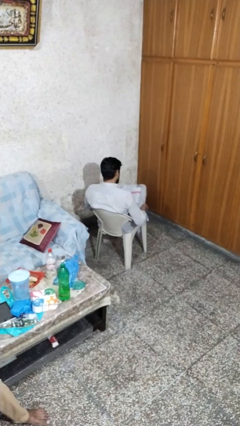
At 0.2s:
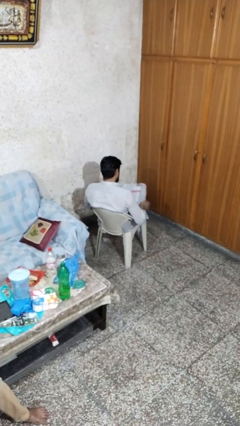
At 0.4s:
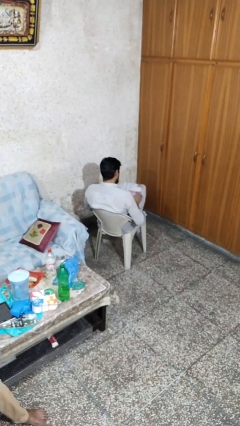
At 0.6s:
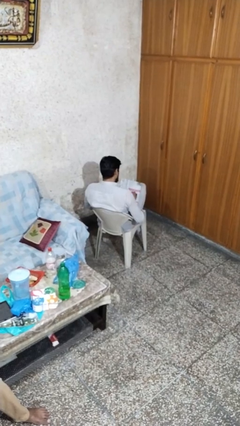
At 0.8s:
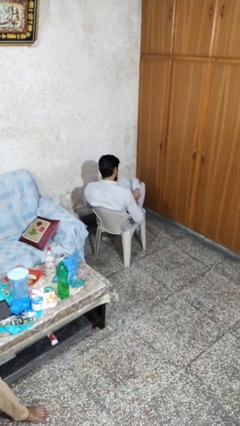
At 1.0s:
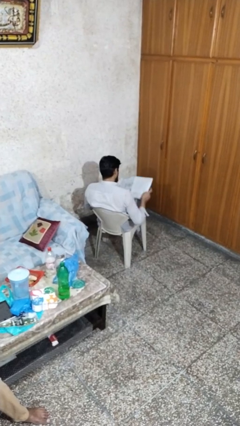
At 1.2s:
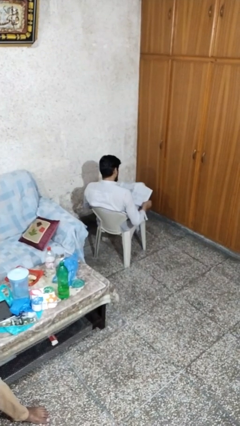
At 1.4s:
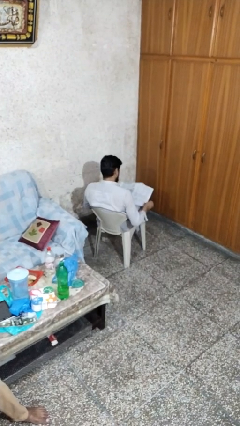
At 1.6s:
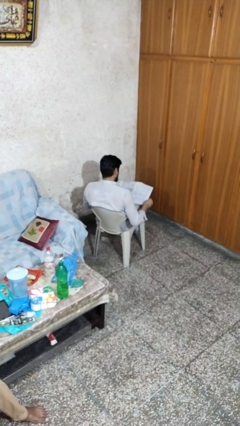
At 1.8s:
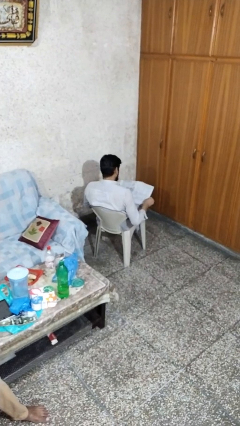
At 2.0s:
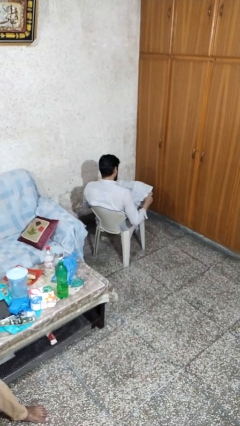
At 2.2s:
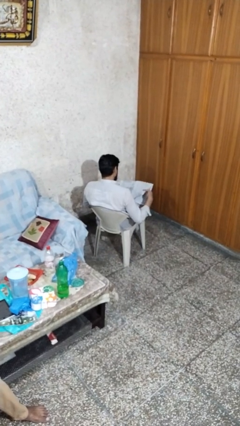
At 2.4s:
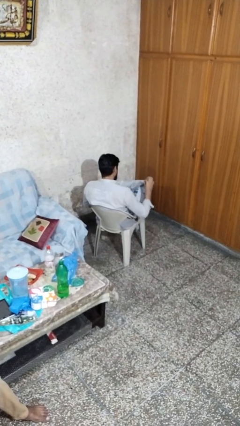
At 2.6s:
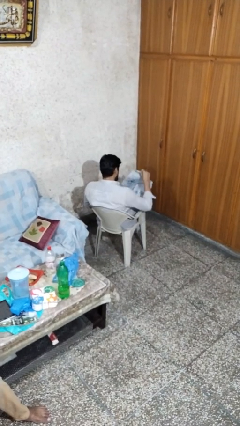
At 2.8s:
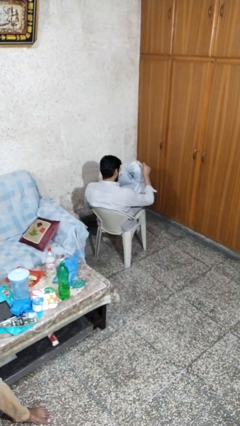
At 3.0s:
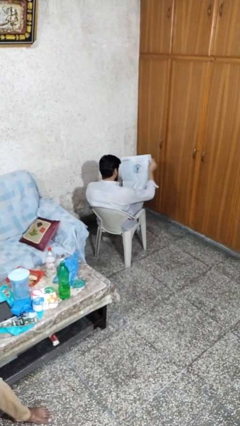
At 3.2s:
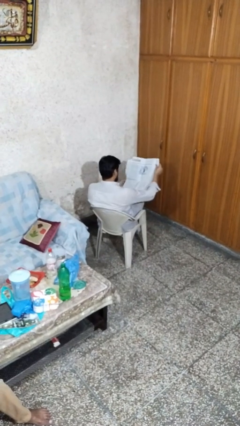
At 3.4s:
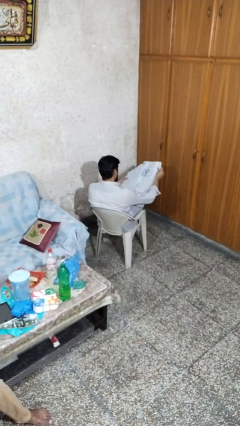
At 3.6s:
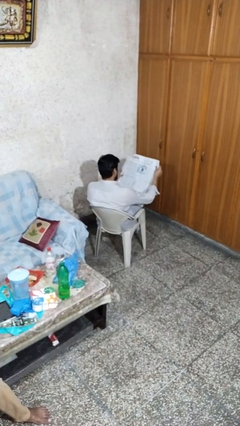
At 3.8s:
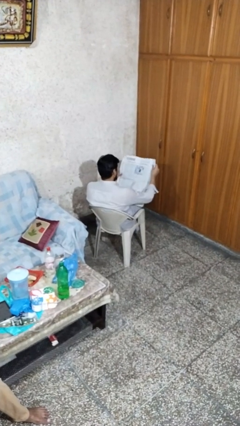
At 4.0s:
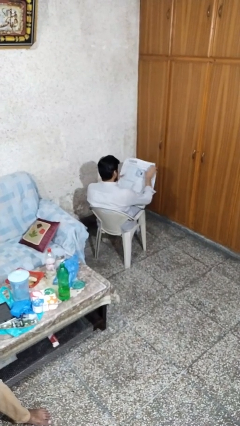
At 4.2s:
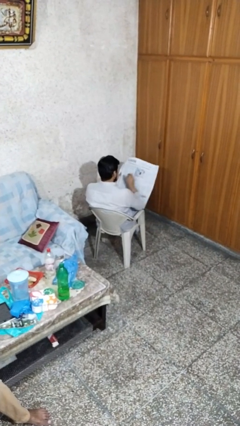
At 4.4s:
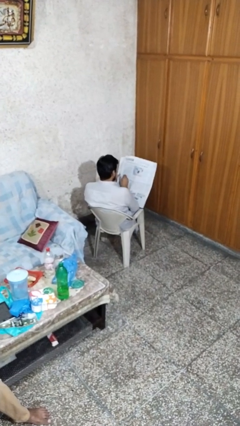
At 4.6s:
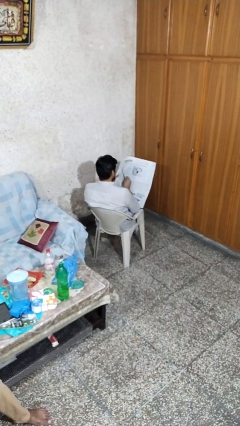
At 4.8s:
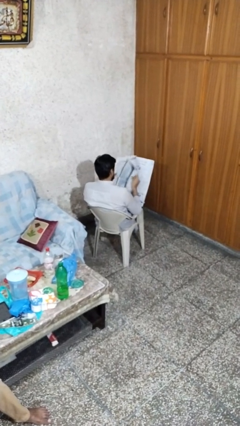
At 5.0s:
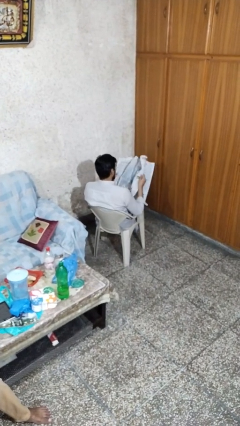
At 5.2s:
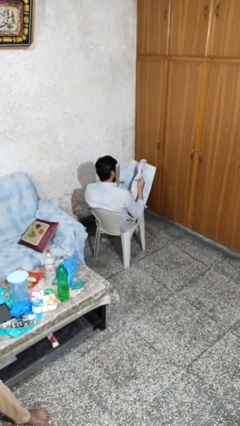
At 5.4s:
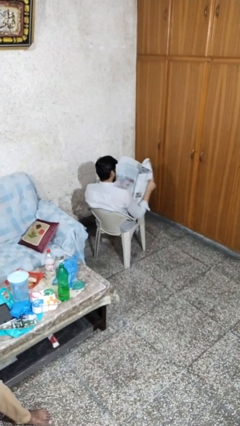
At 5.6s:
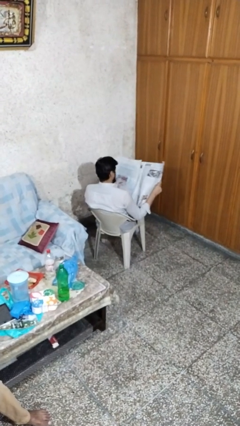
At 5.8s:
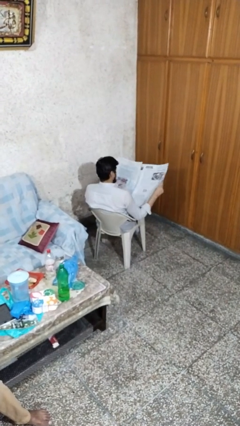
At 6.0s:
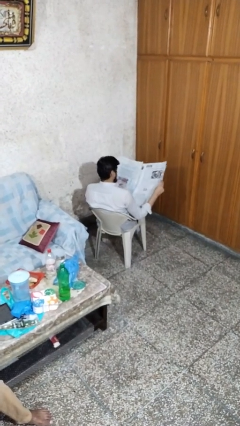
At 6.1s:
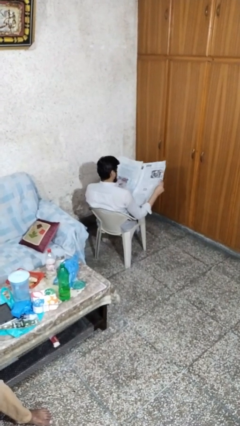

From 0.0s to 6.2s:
person reads newspaper

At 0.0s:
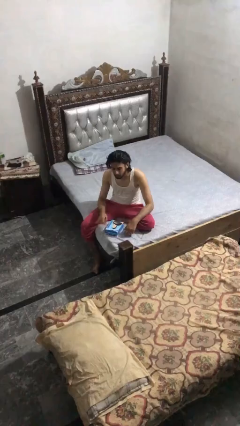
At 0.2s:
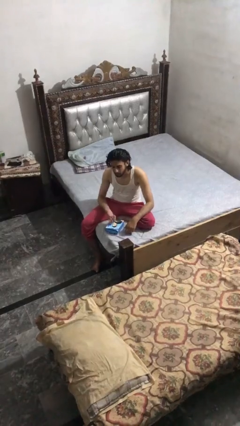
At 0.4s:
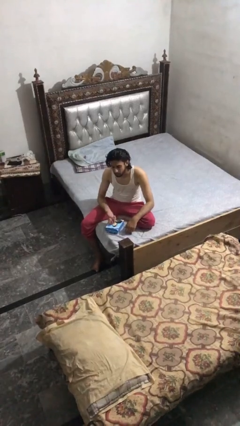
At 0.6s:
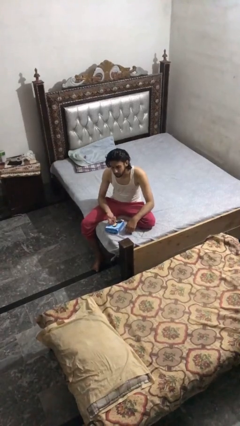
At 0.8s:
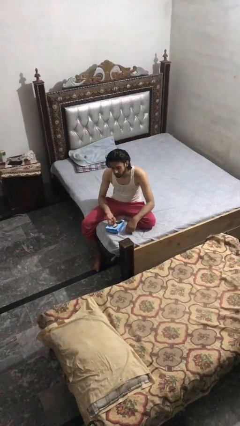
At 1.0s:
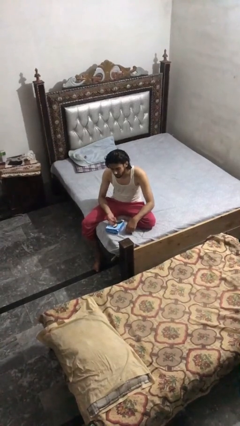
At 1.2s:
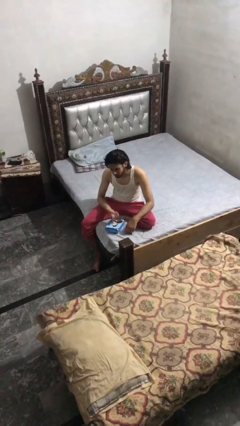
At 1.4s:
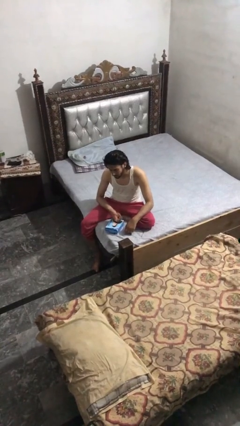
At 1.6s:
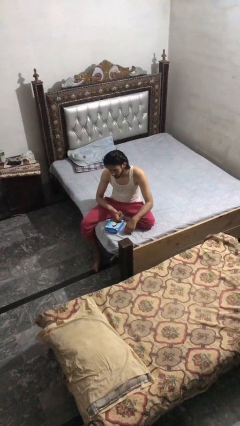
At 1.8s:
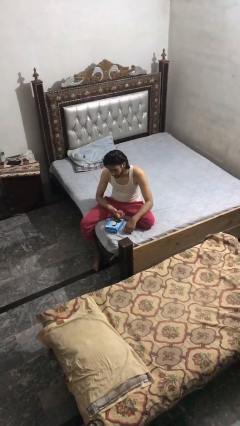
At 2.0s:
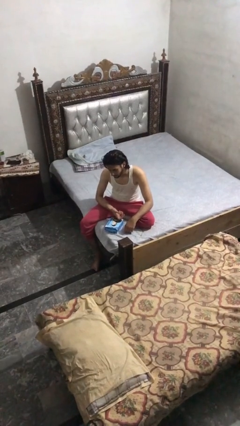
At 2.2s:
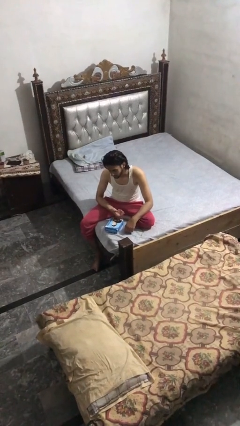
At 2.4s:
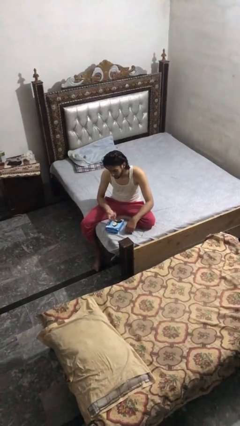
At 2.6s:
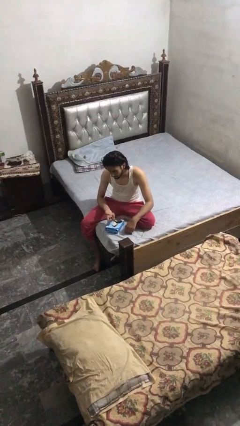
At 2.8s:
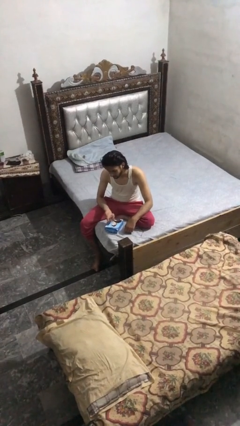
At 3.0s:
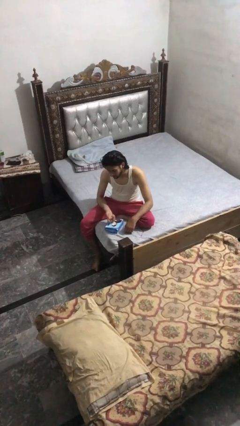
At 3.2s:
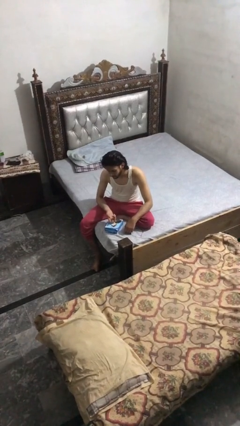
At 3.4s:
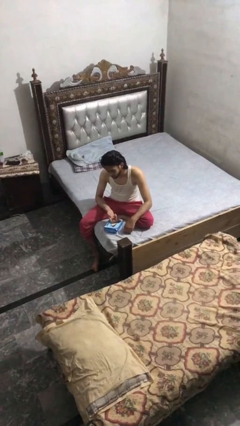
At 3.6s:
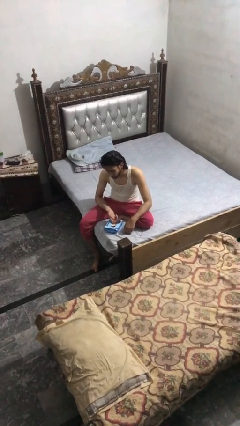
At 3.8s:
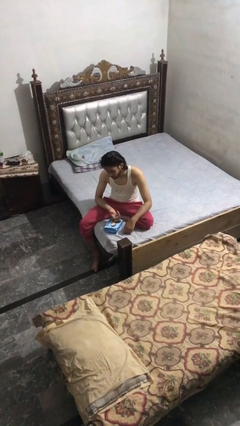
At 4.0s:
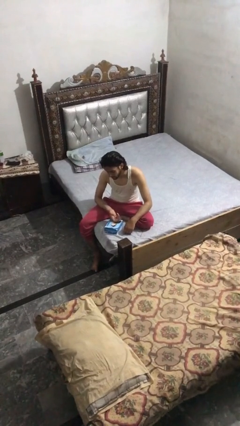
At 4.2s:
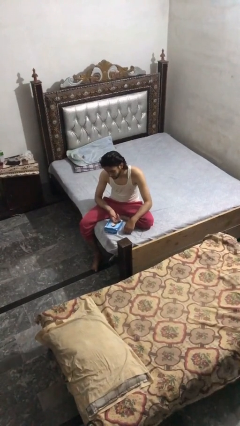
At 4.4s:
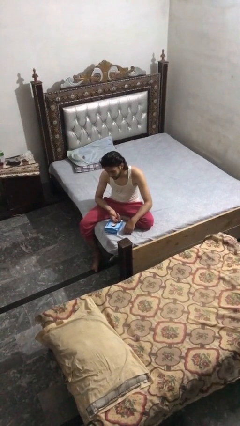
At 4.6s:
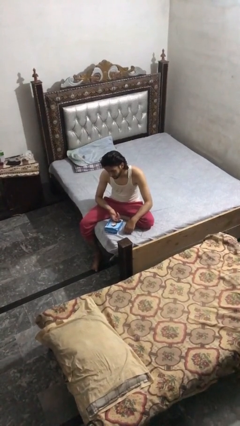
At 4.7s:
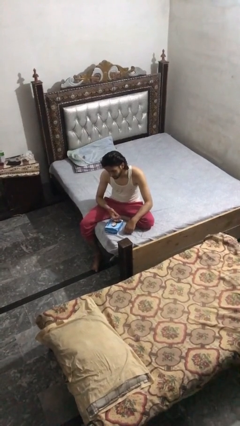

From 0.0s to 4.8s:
person taps object with finger

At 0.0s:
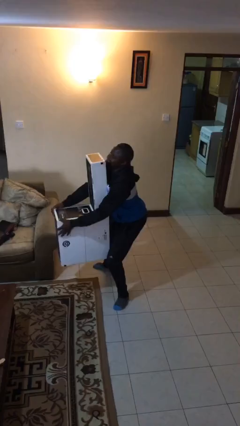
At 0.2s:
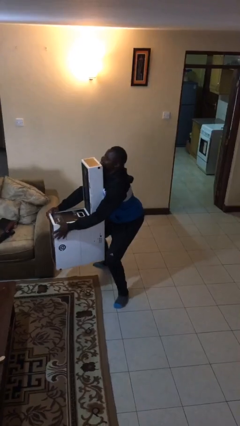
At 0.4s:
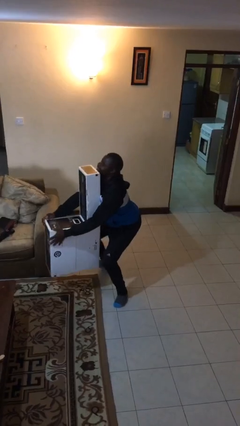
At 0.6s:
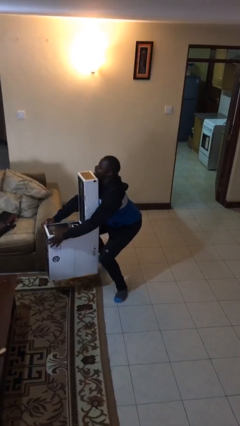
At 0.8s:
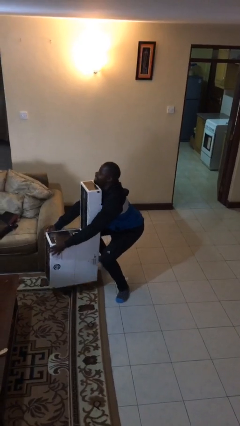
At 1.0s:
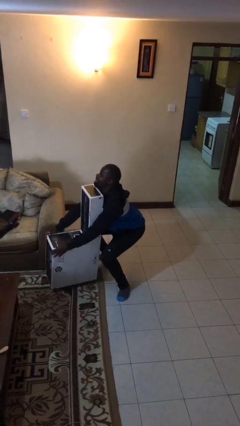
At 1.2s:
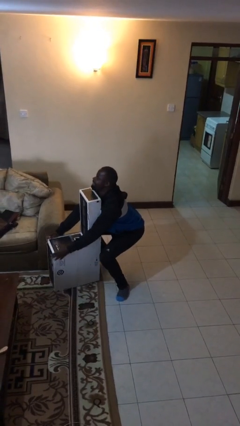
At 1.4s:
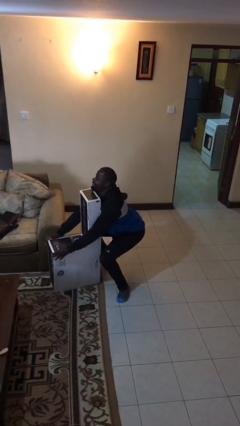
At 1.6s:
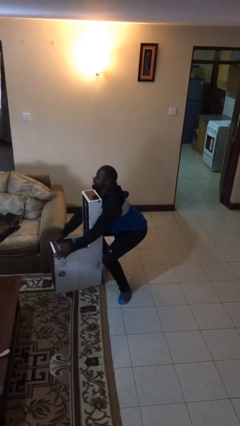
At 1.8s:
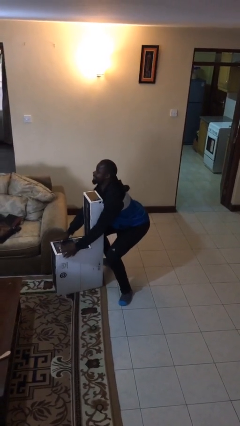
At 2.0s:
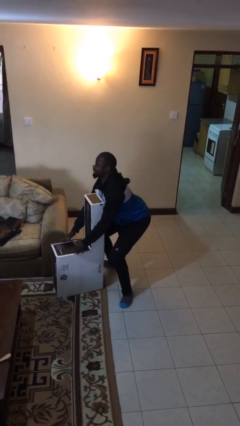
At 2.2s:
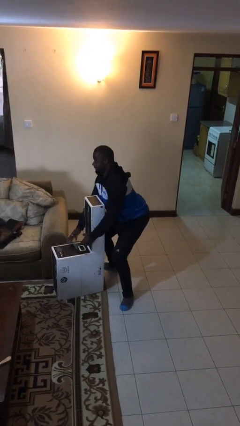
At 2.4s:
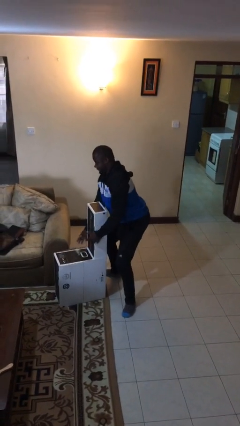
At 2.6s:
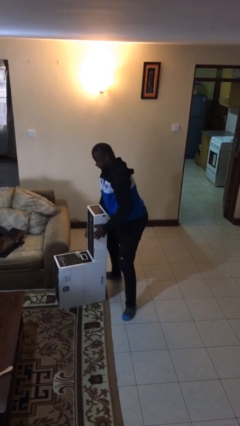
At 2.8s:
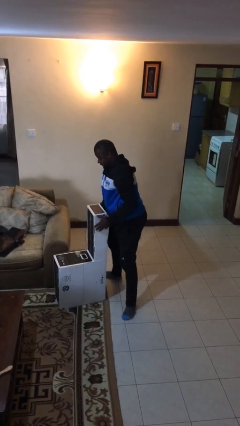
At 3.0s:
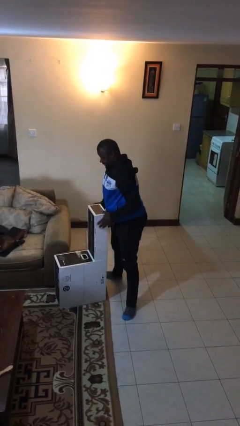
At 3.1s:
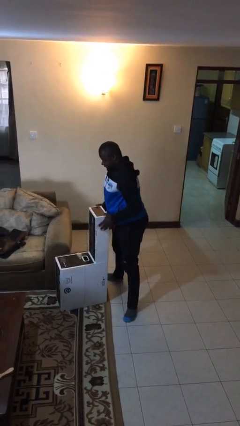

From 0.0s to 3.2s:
person puts down object on floor

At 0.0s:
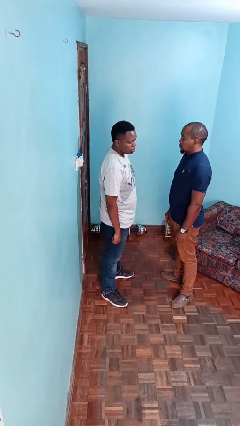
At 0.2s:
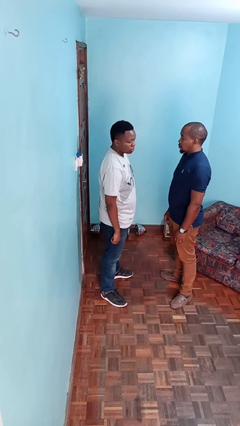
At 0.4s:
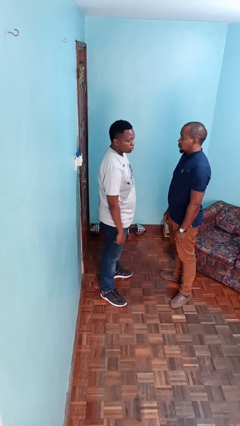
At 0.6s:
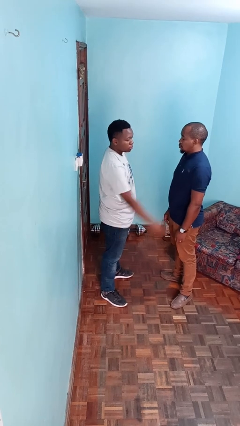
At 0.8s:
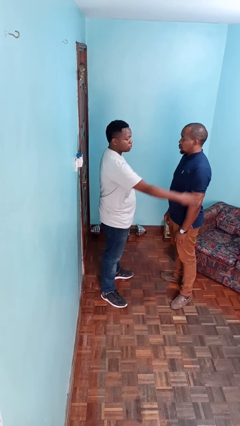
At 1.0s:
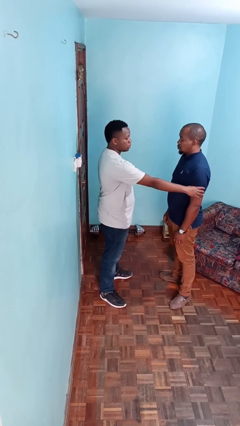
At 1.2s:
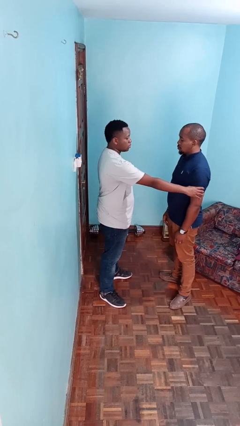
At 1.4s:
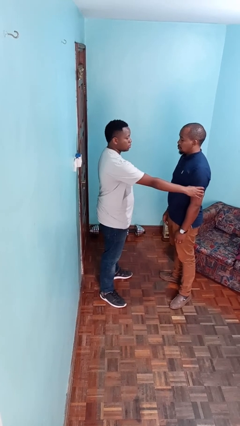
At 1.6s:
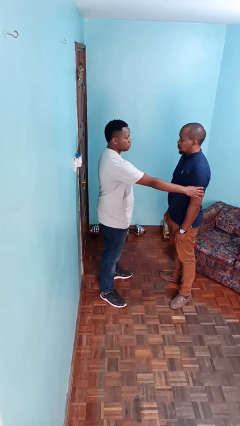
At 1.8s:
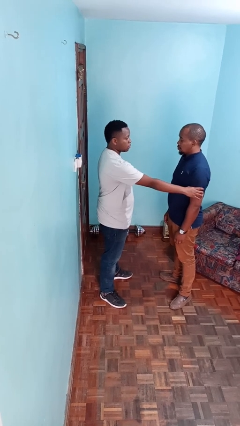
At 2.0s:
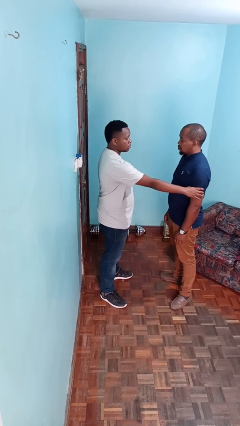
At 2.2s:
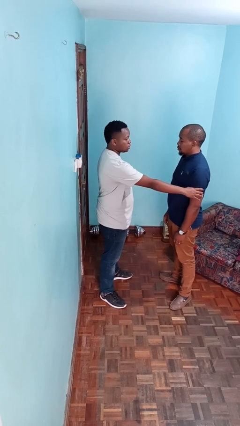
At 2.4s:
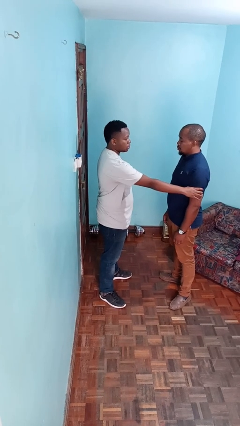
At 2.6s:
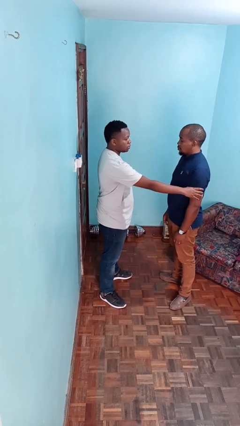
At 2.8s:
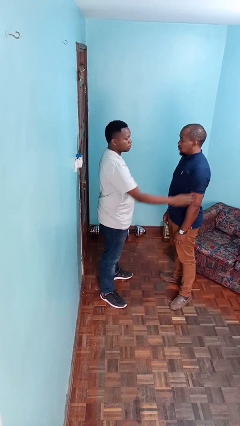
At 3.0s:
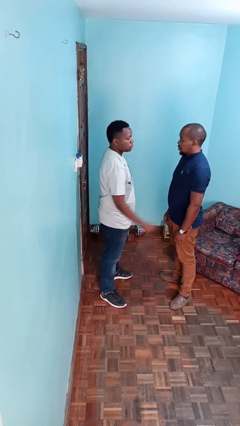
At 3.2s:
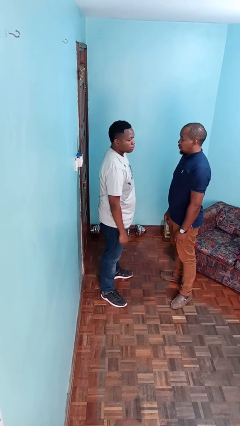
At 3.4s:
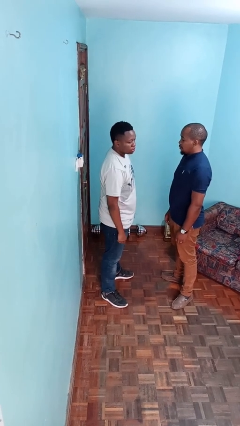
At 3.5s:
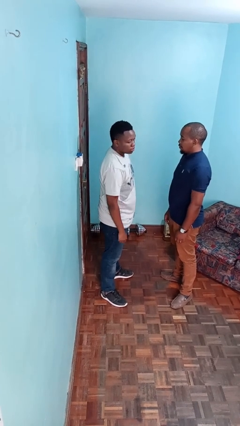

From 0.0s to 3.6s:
person grabs person by bicep
